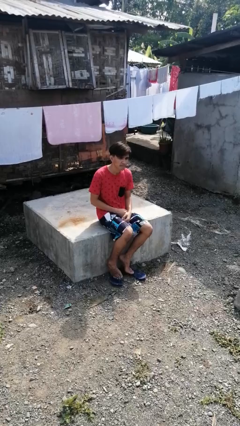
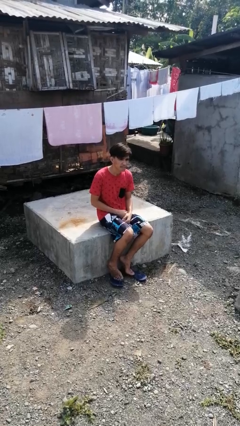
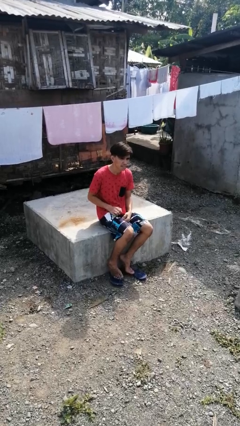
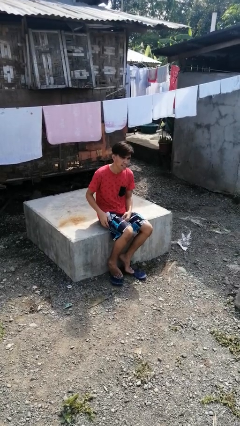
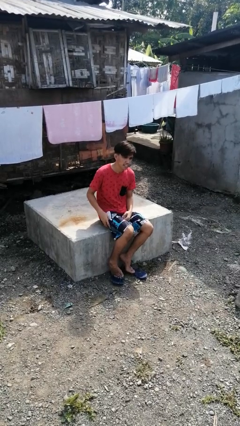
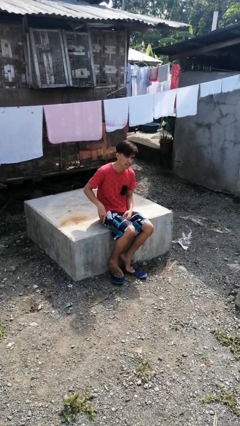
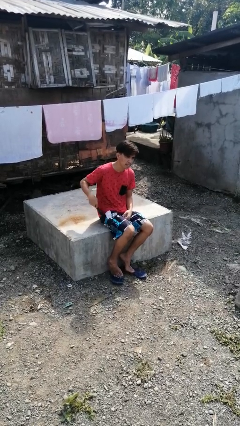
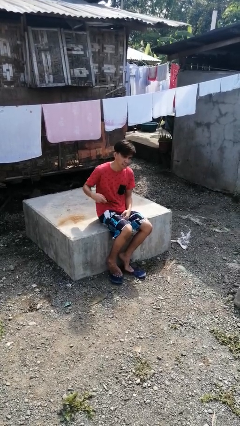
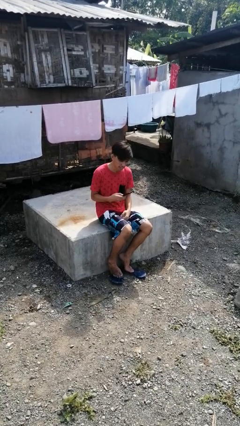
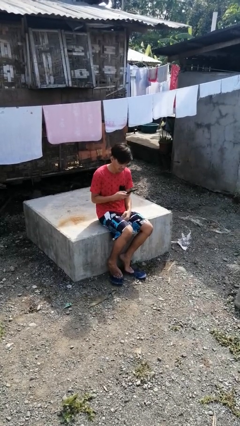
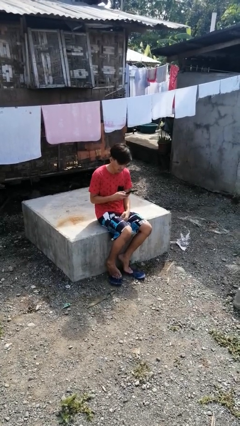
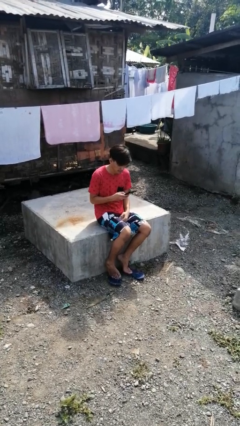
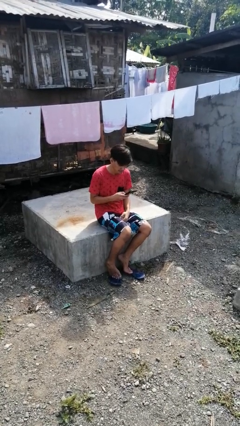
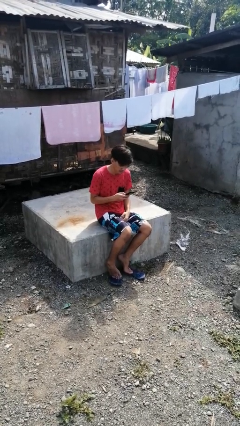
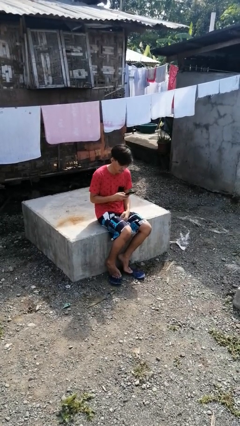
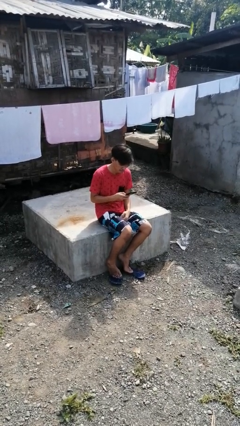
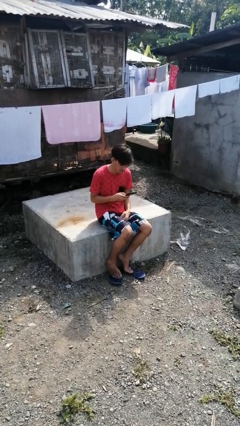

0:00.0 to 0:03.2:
person takes phone from pocket

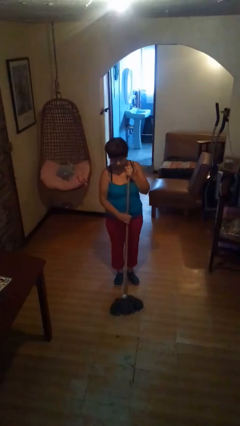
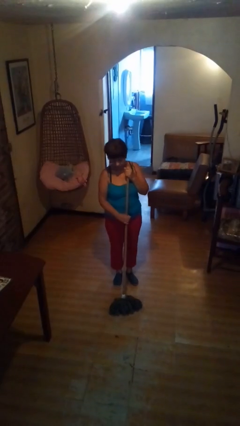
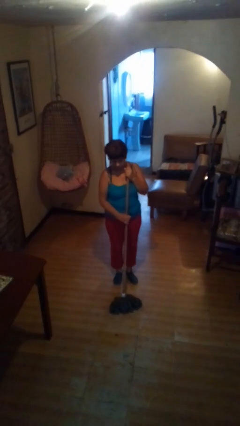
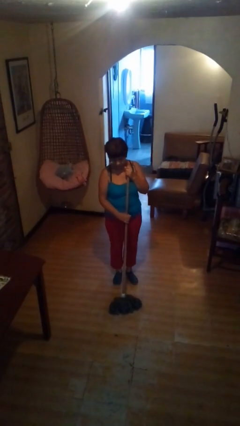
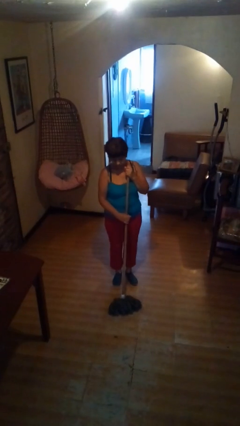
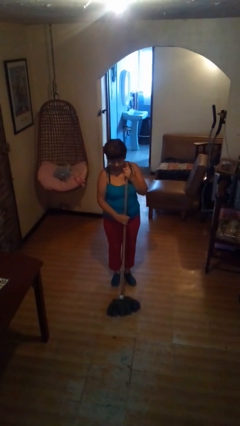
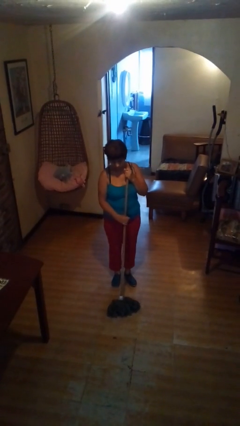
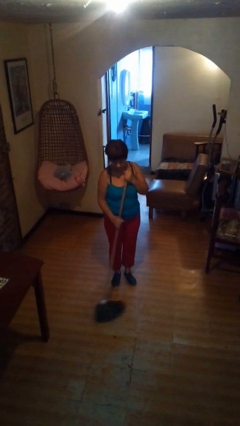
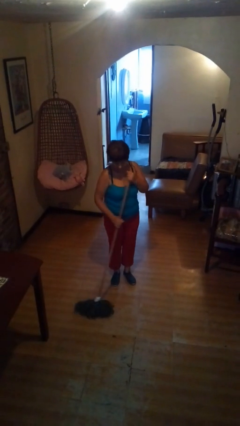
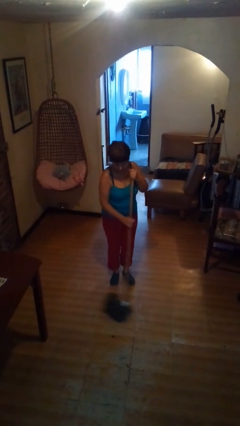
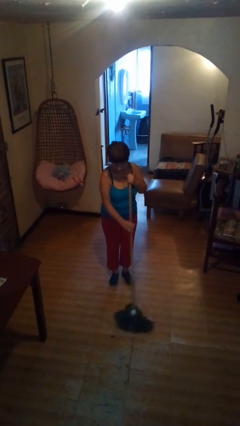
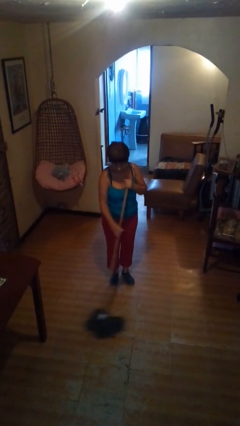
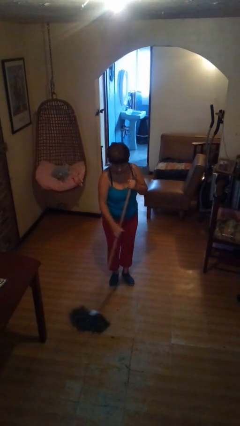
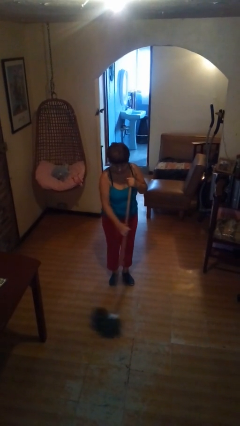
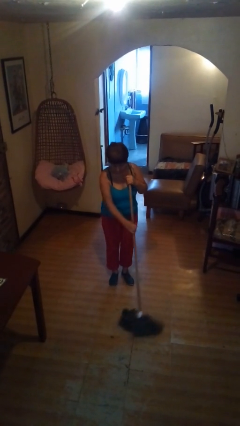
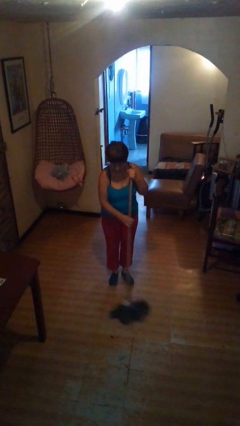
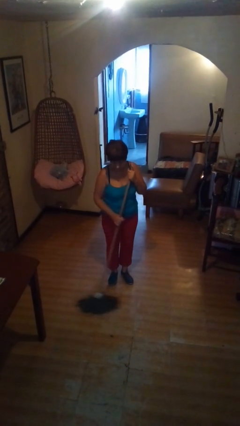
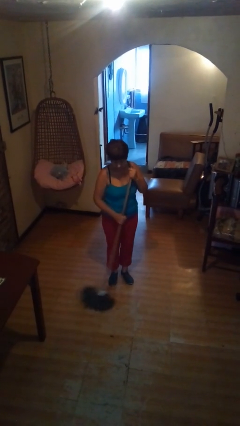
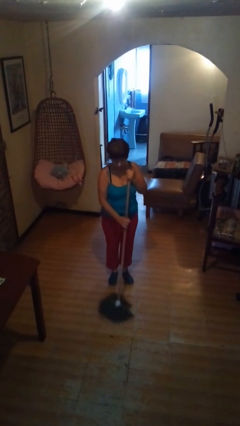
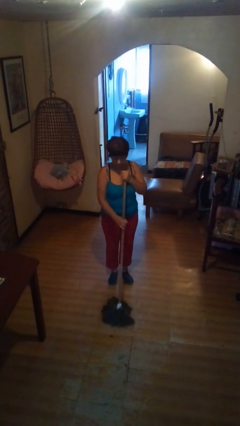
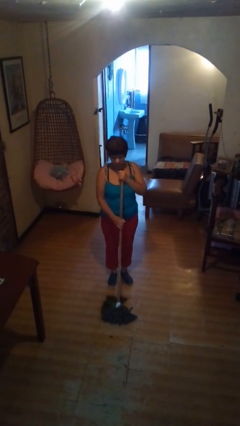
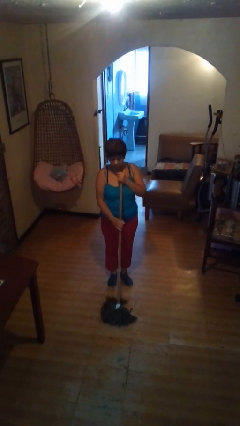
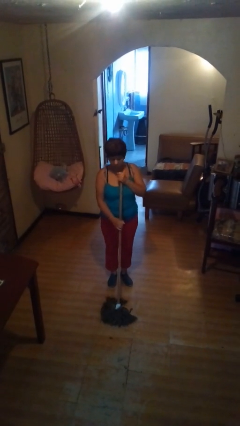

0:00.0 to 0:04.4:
person mops

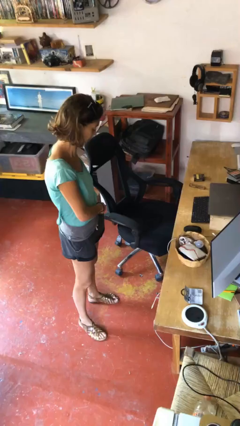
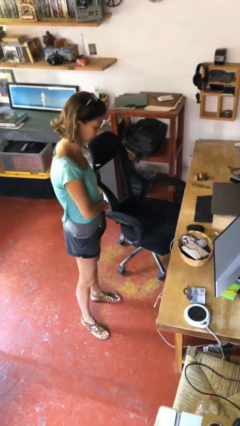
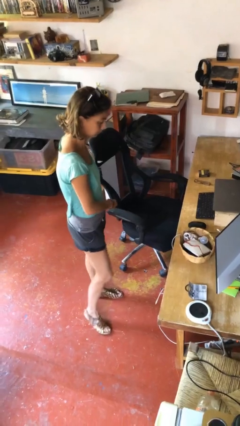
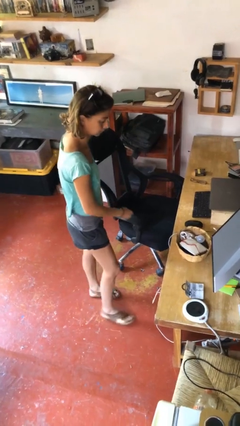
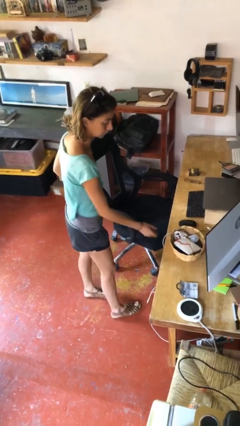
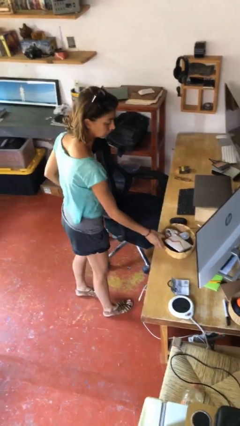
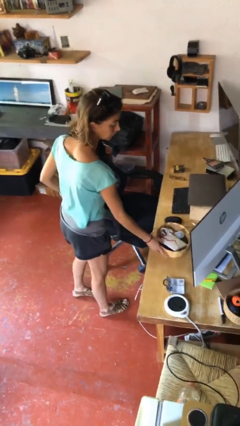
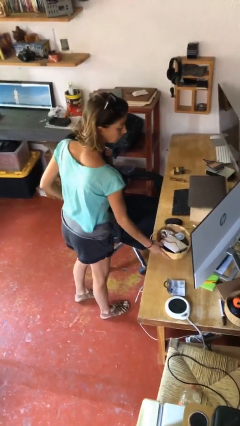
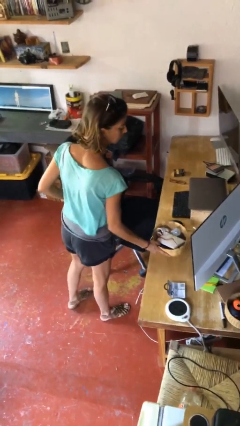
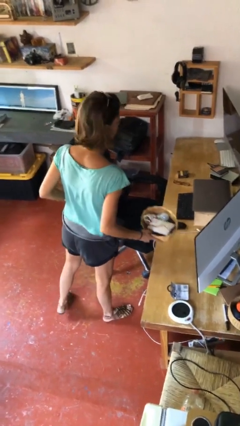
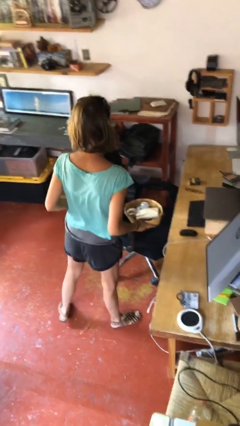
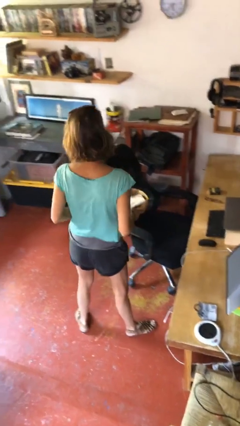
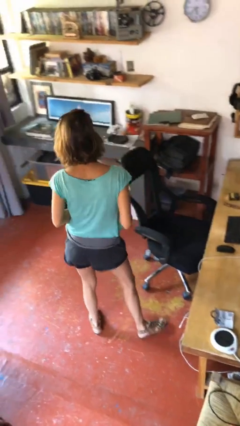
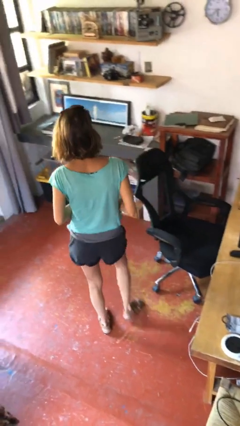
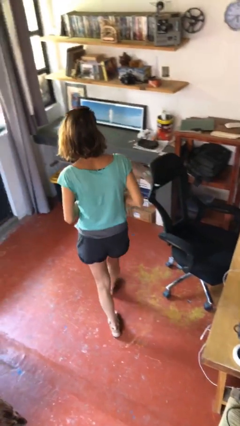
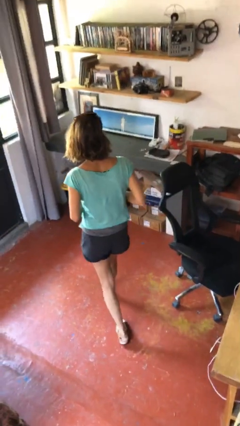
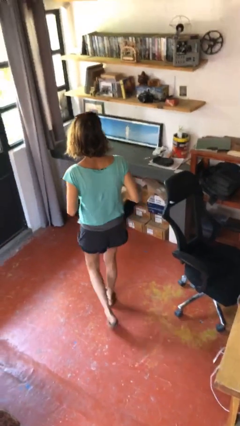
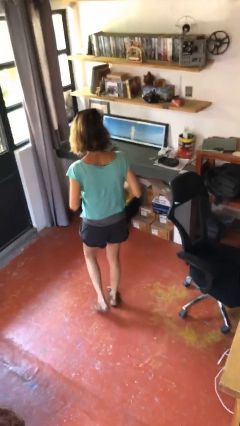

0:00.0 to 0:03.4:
person picks up object from table

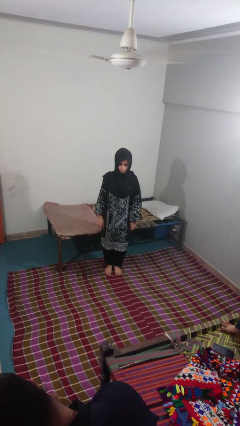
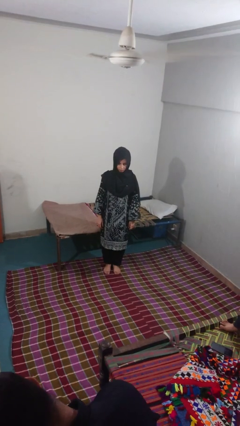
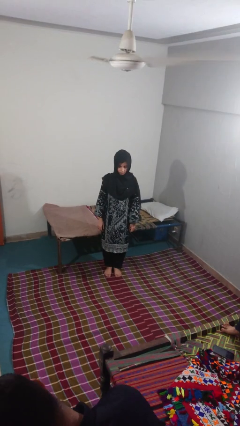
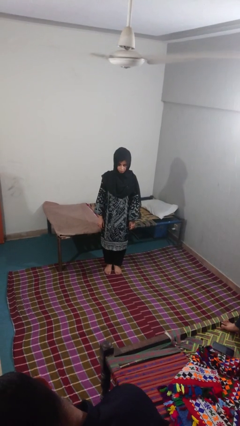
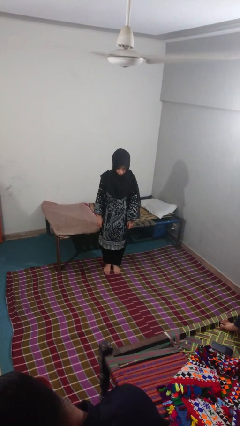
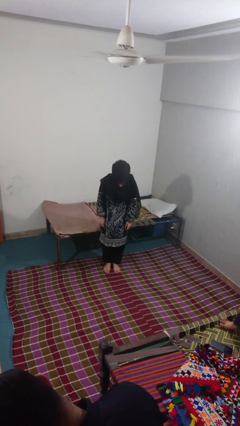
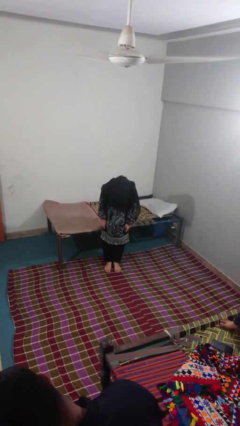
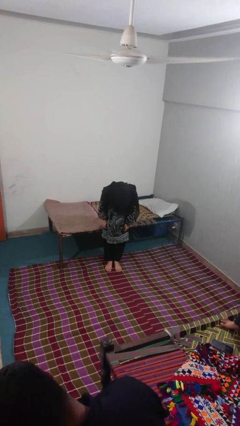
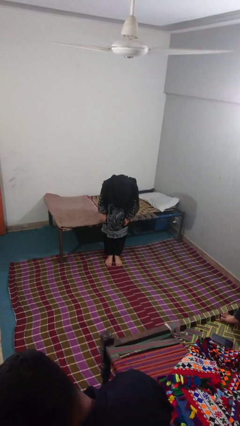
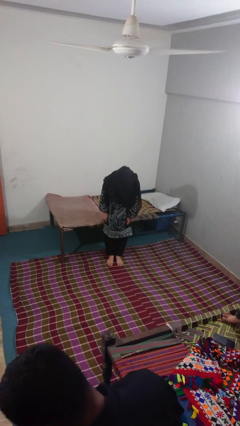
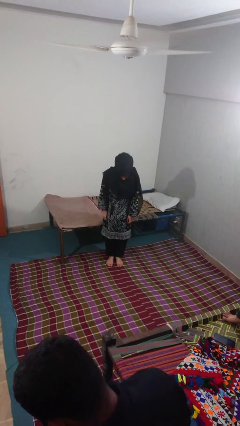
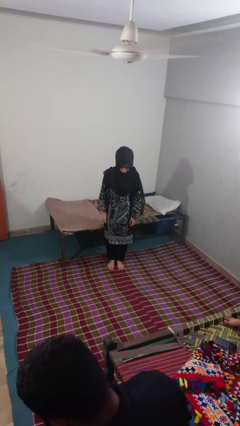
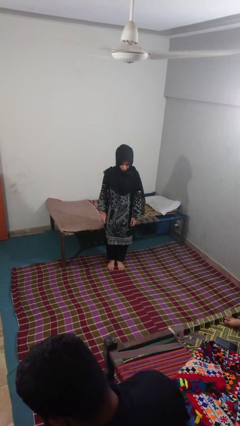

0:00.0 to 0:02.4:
person bows

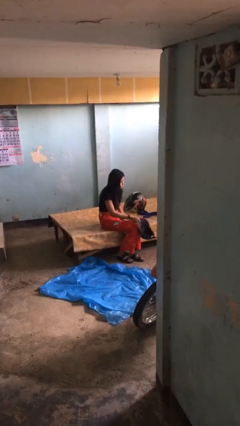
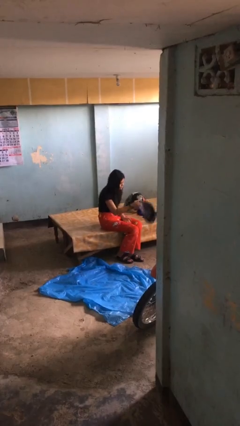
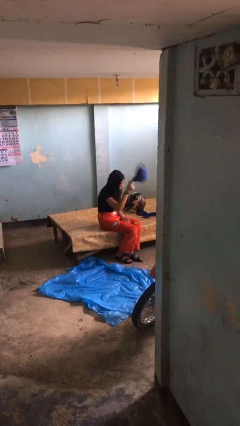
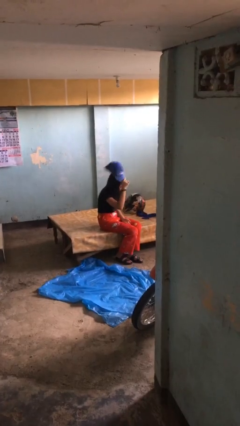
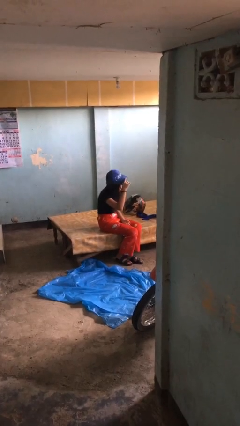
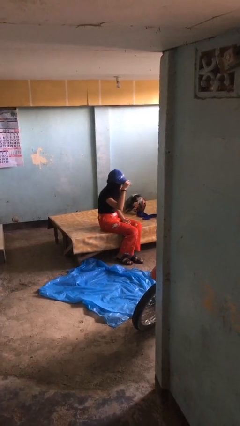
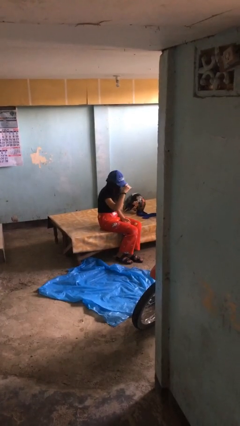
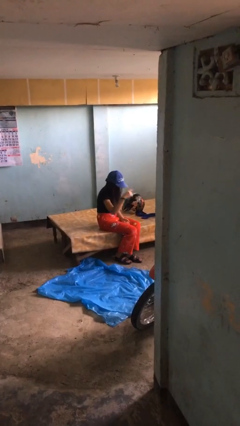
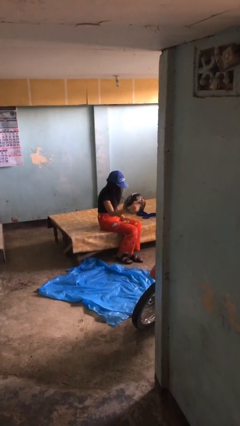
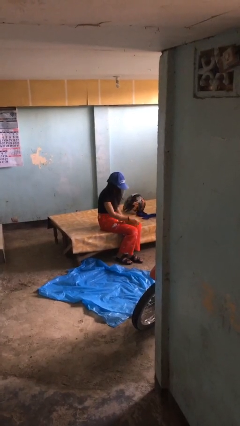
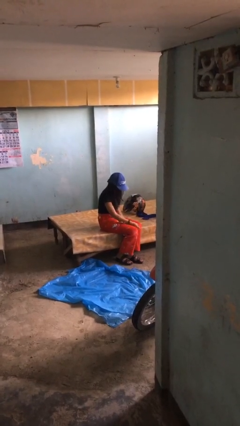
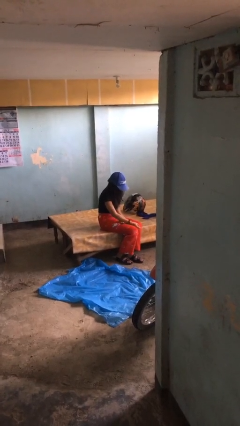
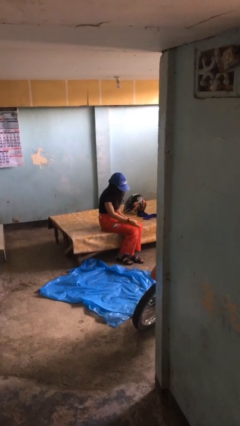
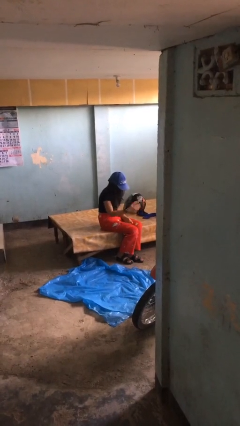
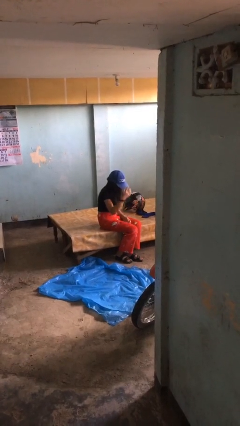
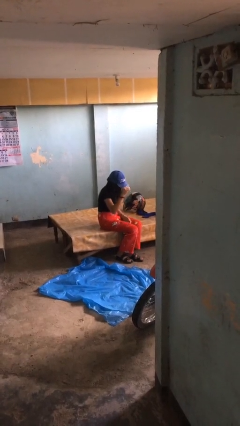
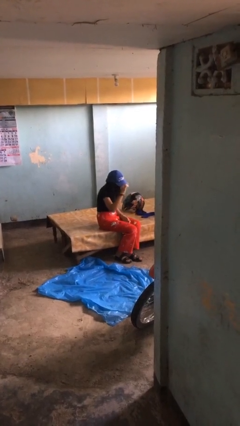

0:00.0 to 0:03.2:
person puts on hat

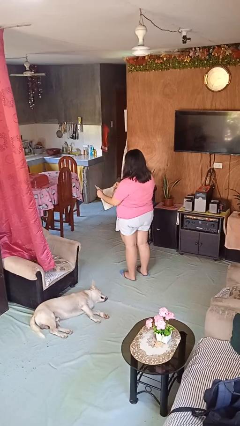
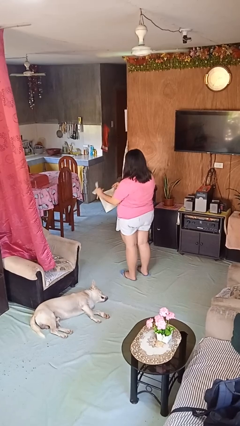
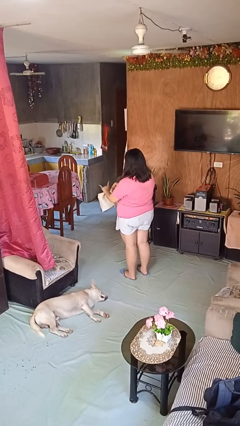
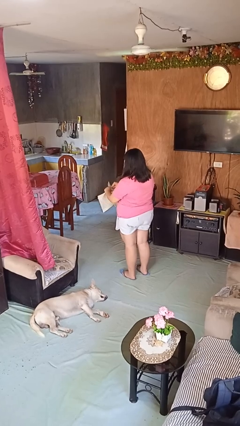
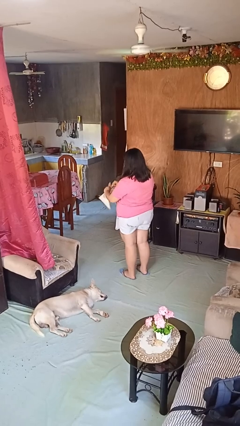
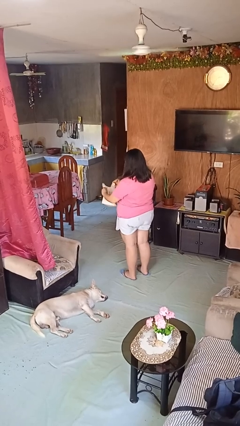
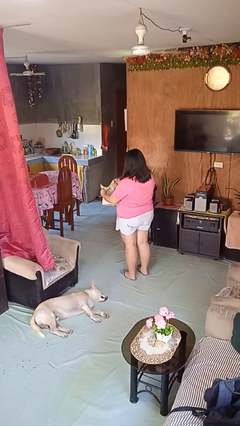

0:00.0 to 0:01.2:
person tears paper
